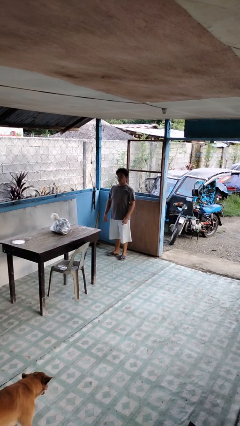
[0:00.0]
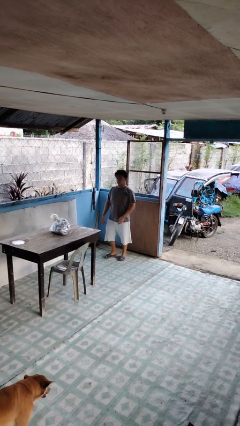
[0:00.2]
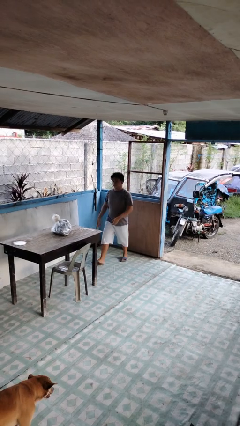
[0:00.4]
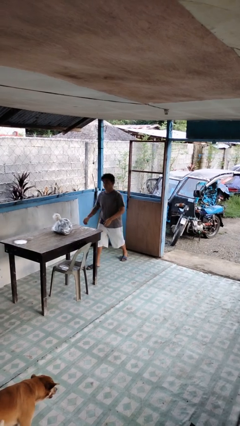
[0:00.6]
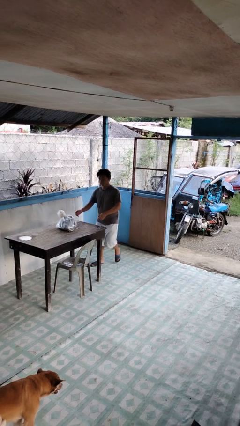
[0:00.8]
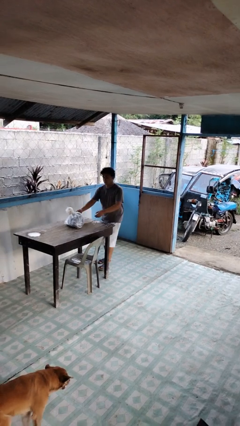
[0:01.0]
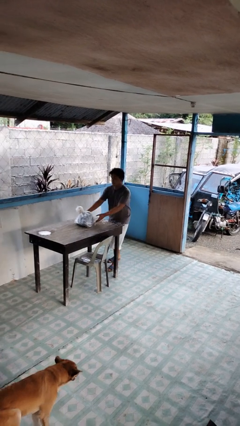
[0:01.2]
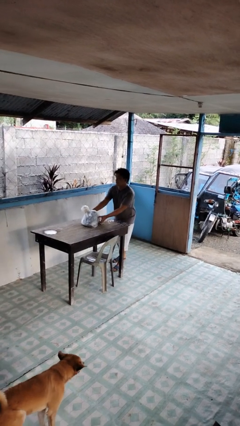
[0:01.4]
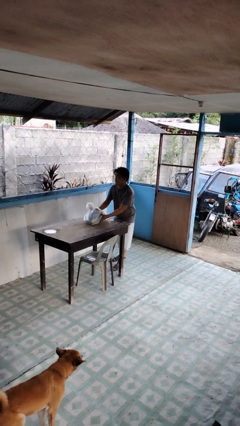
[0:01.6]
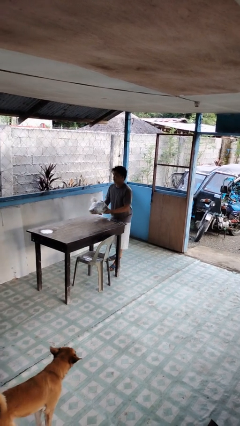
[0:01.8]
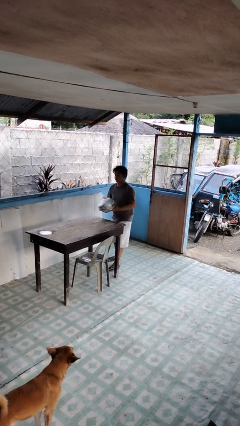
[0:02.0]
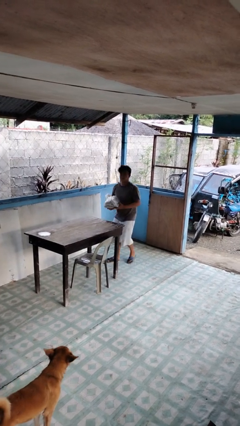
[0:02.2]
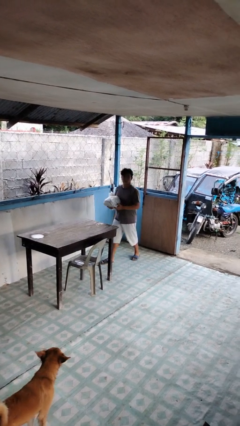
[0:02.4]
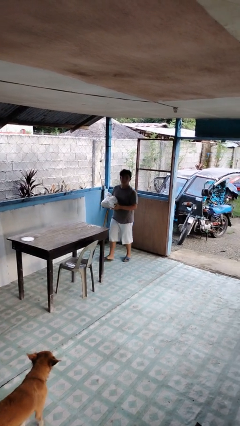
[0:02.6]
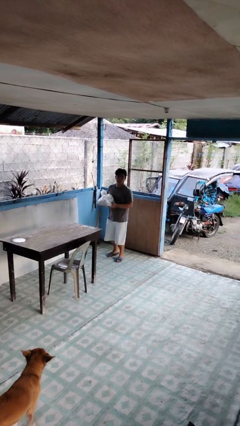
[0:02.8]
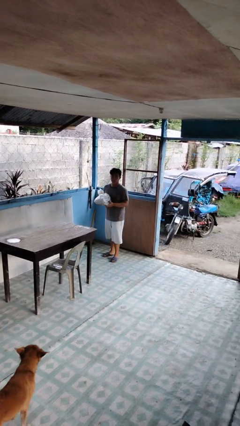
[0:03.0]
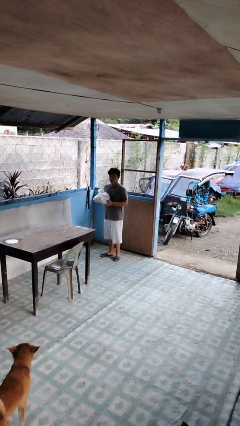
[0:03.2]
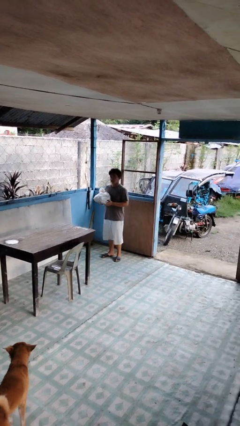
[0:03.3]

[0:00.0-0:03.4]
person picks up object from table

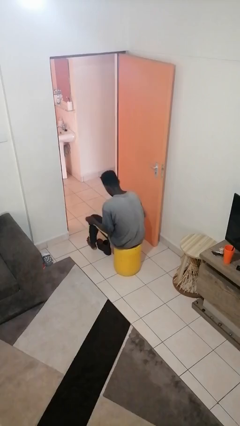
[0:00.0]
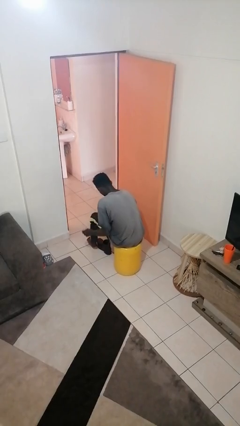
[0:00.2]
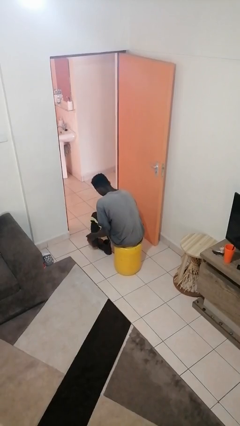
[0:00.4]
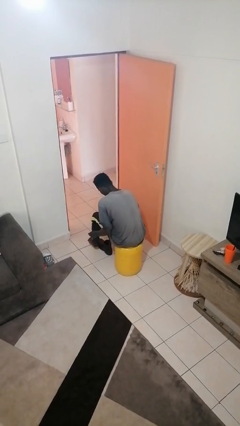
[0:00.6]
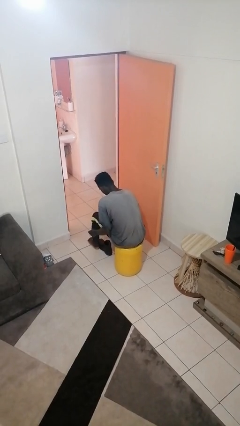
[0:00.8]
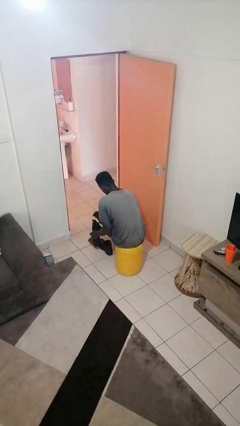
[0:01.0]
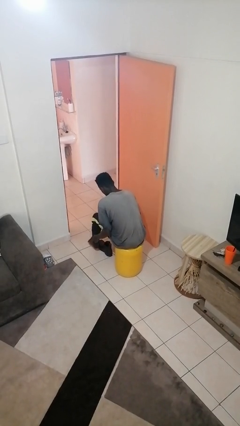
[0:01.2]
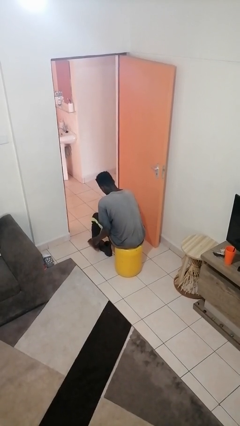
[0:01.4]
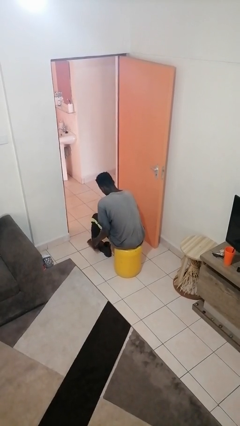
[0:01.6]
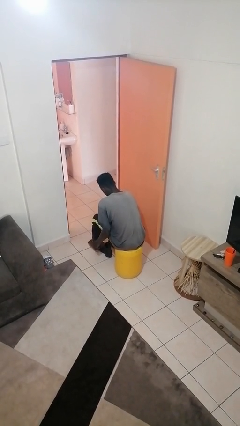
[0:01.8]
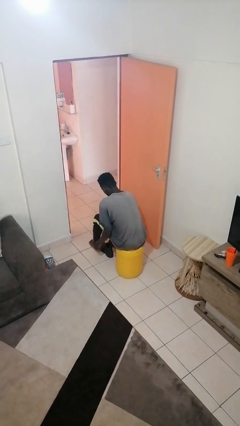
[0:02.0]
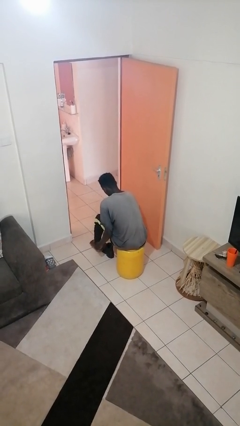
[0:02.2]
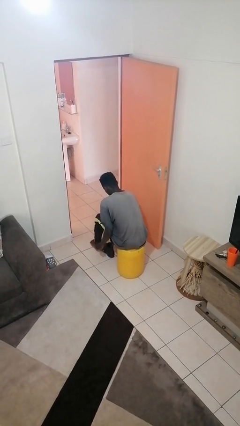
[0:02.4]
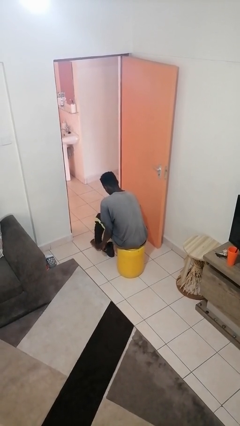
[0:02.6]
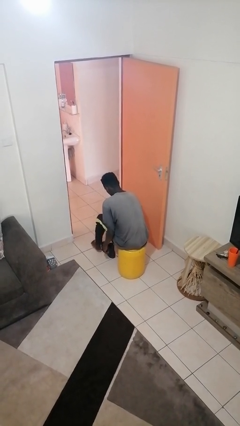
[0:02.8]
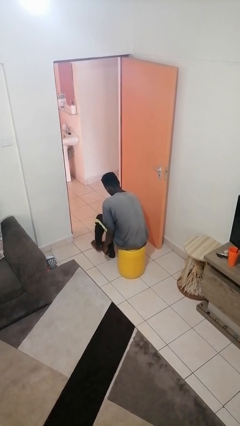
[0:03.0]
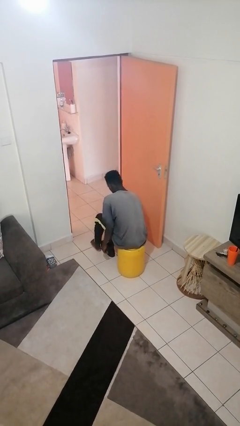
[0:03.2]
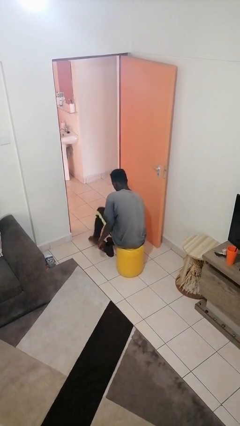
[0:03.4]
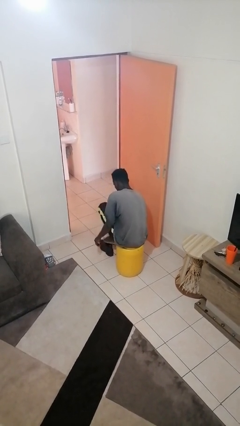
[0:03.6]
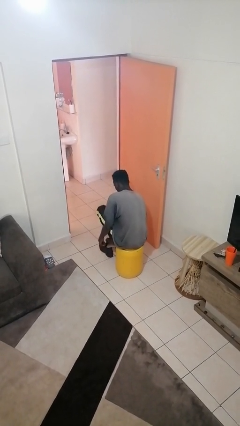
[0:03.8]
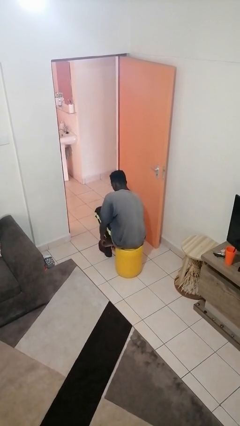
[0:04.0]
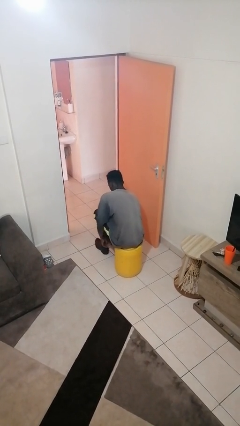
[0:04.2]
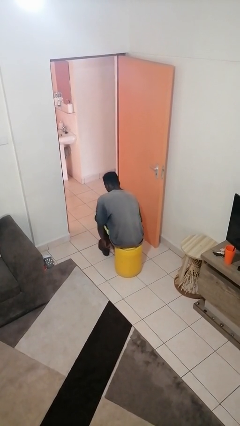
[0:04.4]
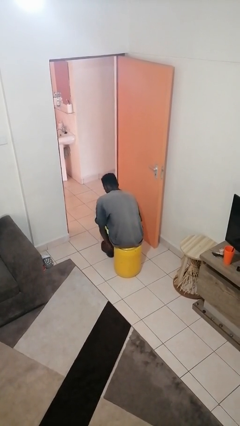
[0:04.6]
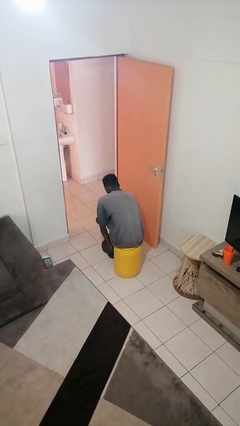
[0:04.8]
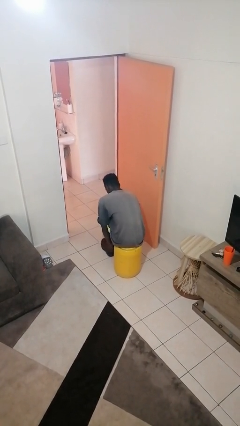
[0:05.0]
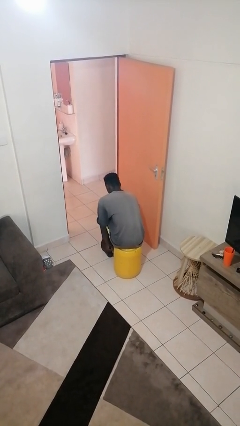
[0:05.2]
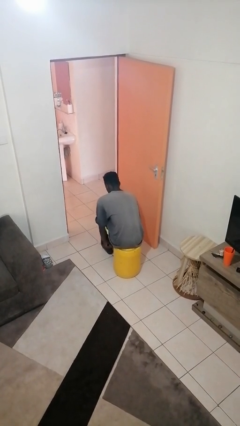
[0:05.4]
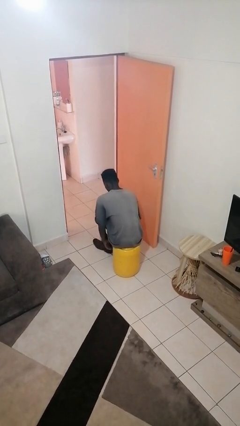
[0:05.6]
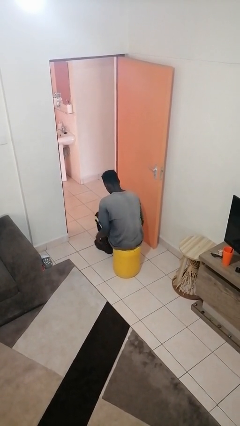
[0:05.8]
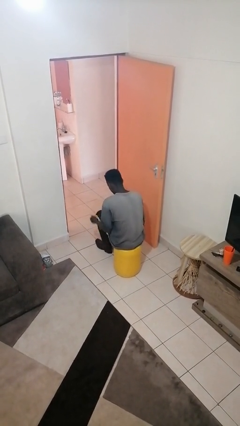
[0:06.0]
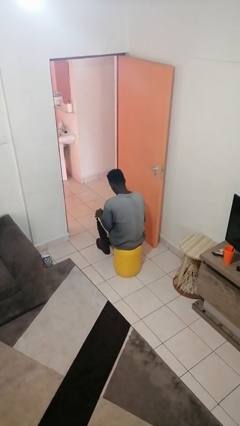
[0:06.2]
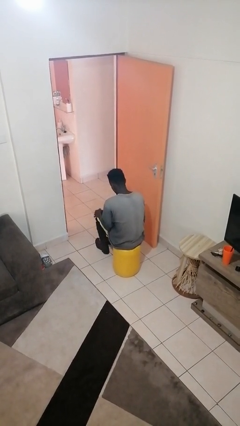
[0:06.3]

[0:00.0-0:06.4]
person puts on shoes

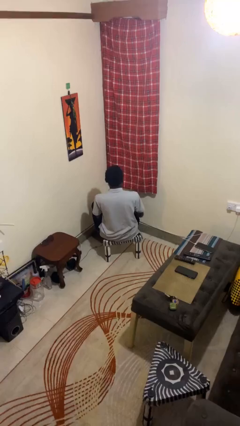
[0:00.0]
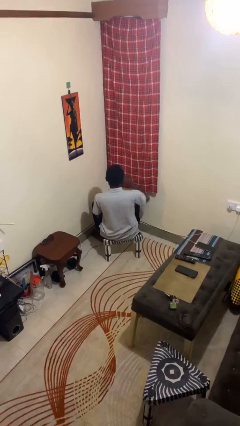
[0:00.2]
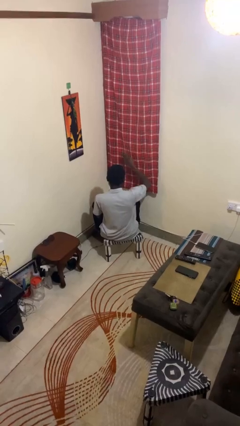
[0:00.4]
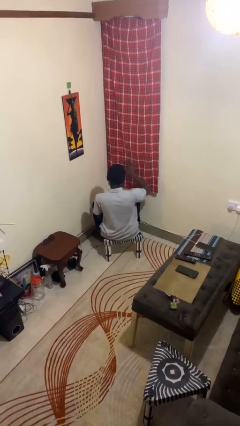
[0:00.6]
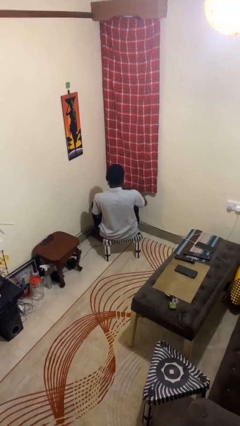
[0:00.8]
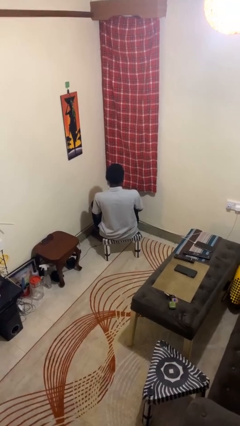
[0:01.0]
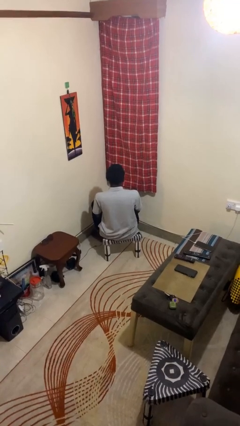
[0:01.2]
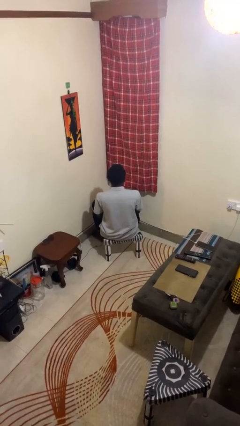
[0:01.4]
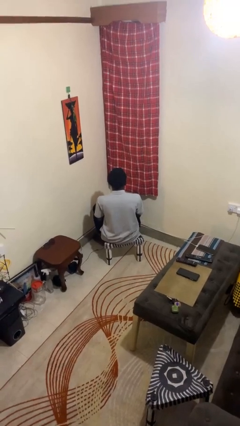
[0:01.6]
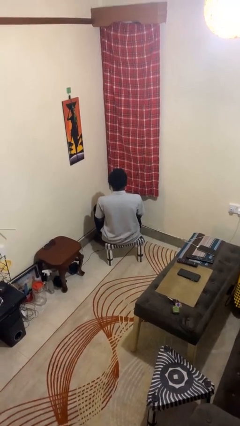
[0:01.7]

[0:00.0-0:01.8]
person gestures swipe down

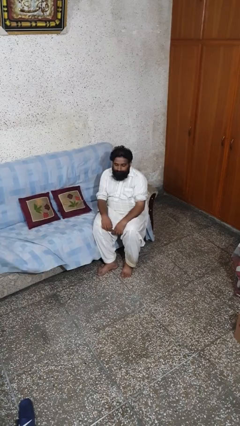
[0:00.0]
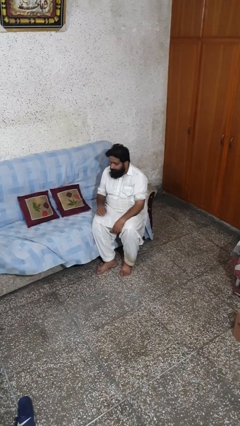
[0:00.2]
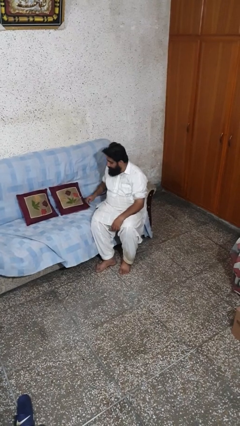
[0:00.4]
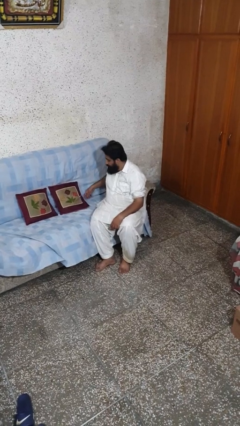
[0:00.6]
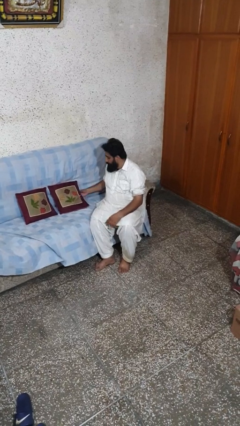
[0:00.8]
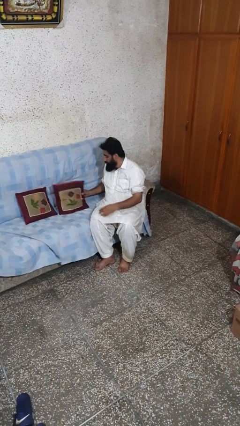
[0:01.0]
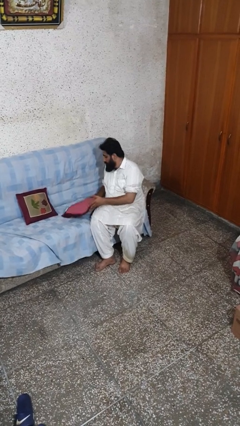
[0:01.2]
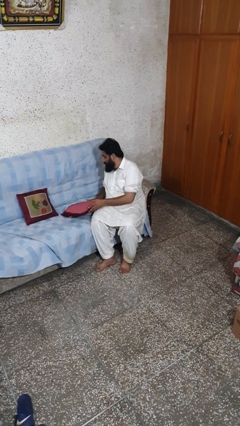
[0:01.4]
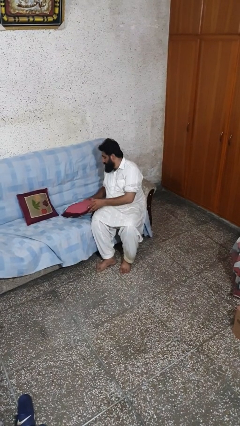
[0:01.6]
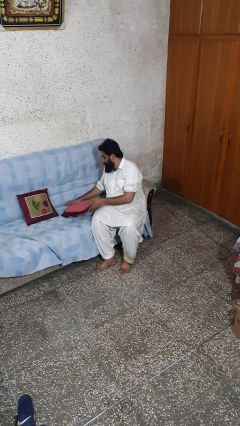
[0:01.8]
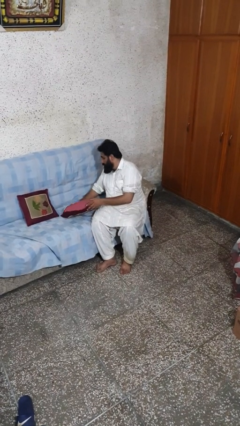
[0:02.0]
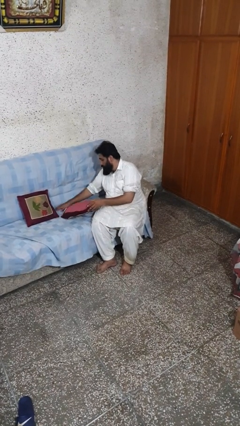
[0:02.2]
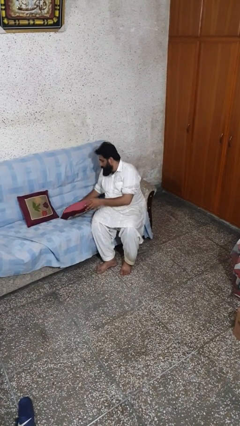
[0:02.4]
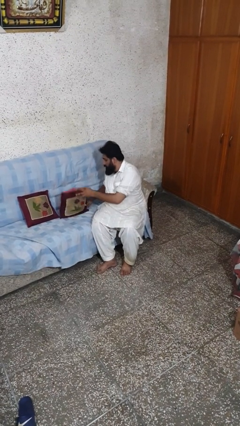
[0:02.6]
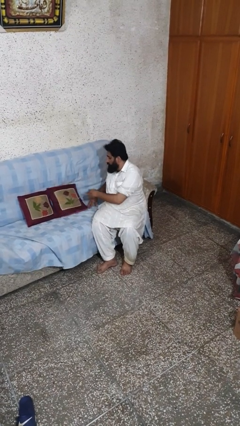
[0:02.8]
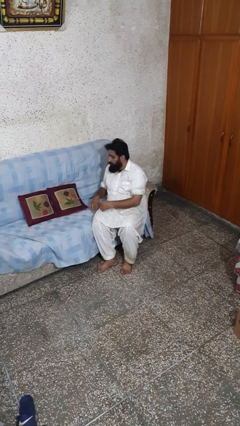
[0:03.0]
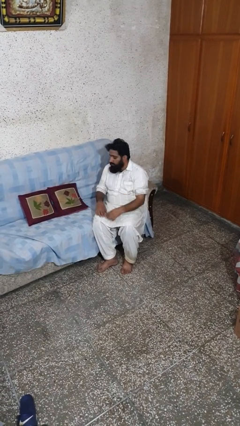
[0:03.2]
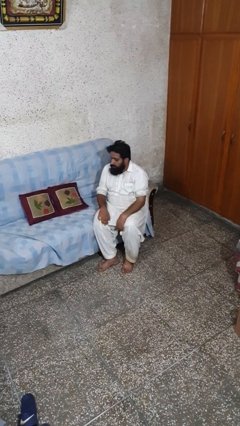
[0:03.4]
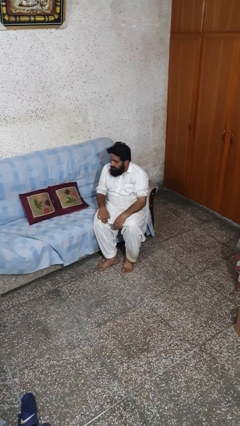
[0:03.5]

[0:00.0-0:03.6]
person searches in couch

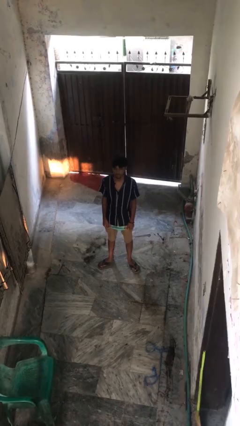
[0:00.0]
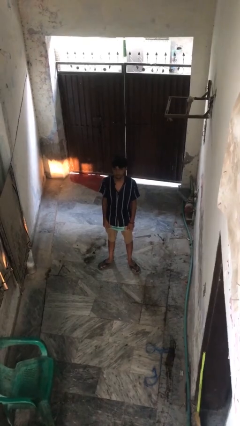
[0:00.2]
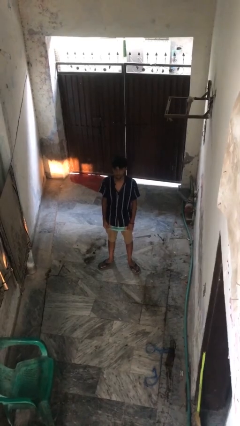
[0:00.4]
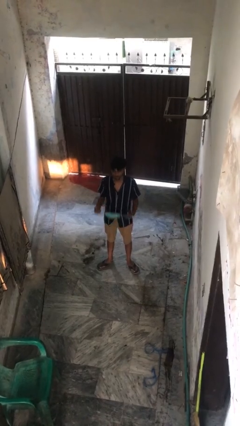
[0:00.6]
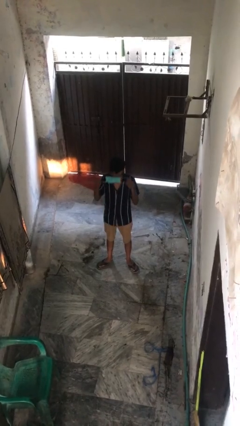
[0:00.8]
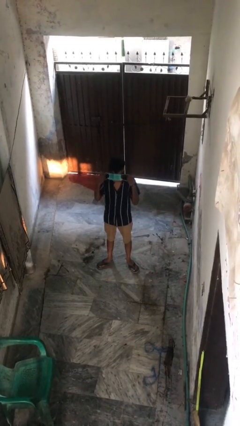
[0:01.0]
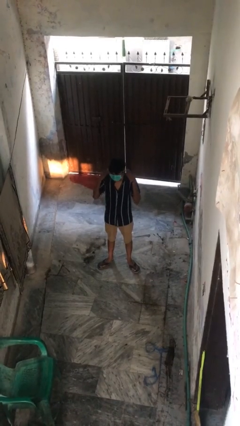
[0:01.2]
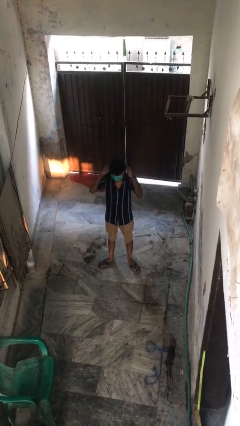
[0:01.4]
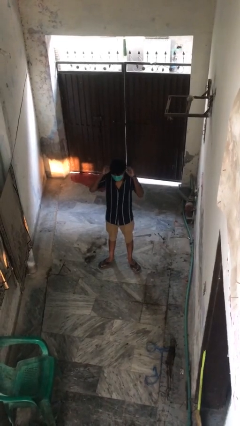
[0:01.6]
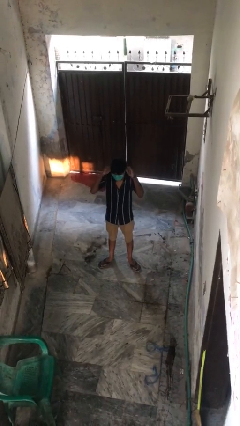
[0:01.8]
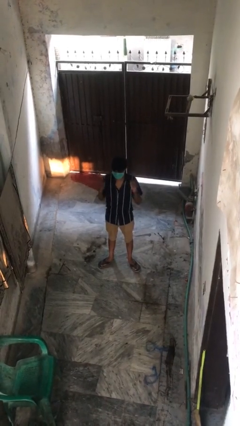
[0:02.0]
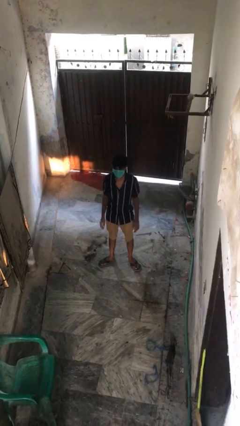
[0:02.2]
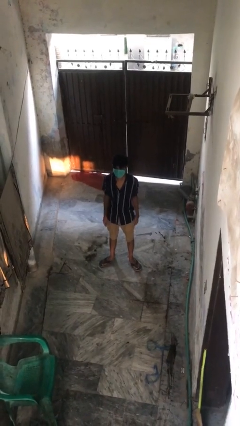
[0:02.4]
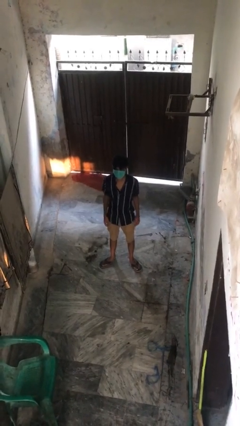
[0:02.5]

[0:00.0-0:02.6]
person puts on facemask
